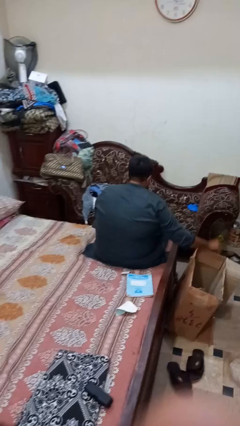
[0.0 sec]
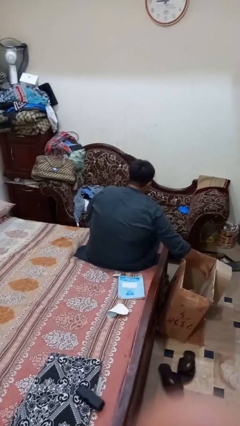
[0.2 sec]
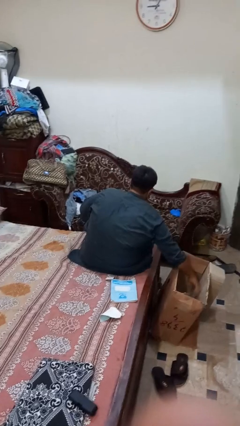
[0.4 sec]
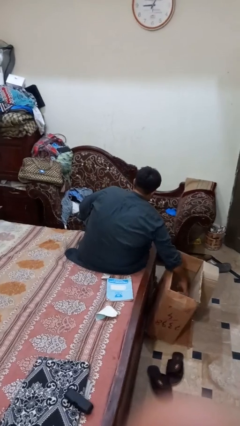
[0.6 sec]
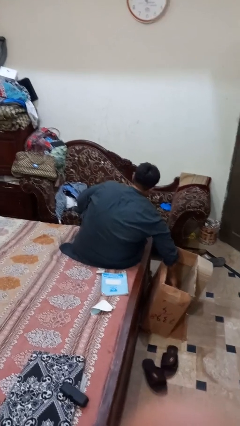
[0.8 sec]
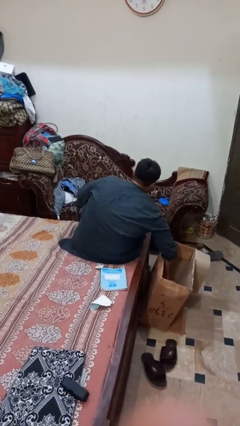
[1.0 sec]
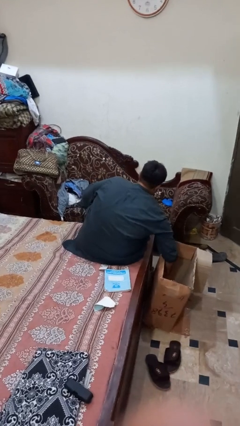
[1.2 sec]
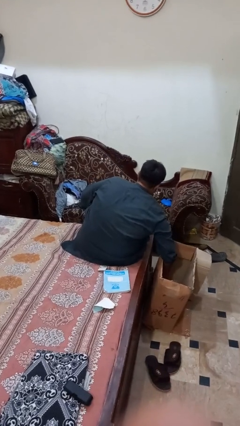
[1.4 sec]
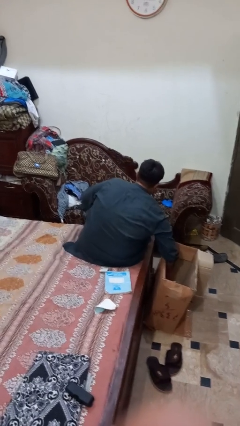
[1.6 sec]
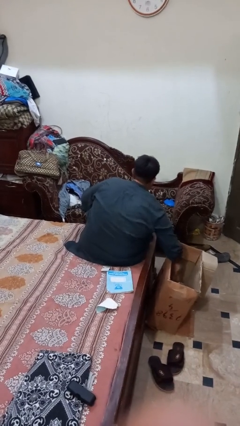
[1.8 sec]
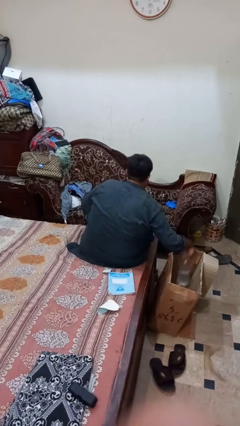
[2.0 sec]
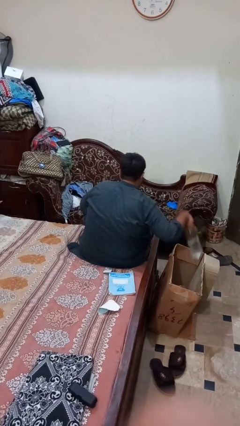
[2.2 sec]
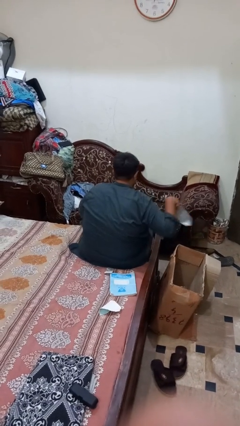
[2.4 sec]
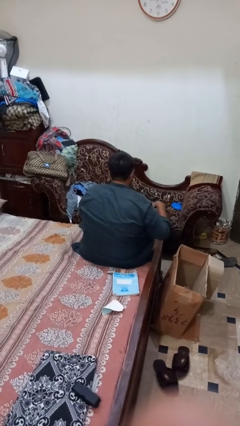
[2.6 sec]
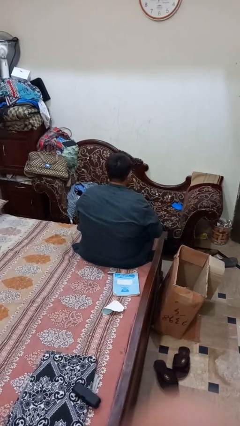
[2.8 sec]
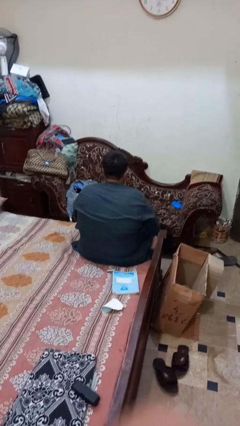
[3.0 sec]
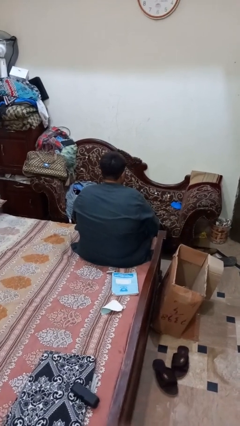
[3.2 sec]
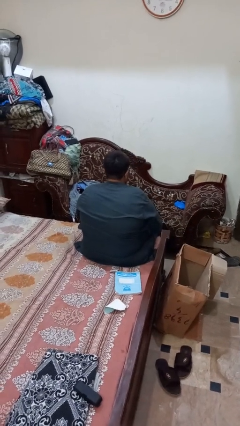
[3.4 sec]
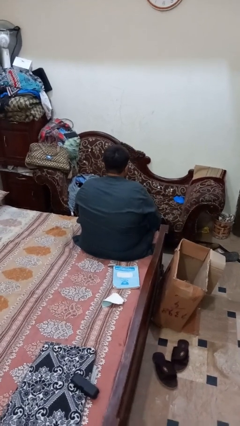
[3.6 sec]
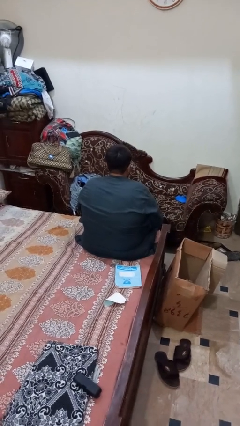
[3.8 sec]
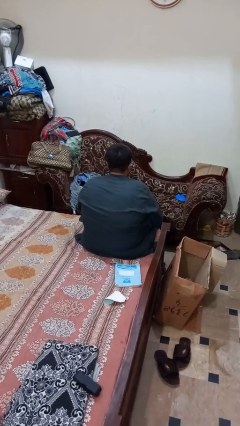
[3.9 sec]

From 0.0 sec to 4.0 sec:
person takes object from box

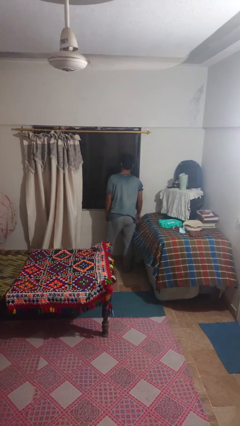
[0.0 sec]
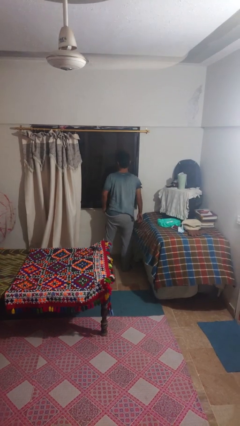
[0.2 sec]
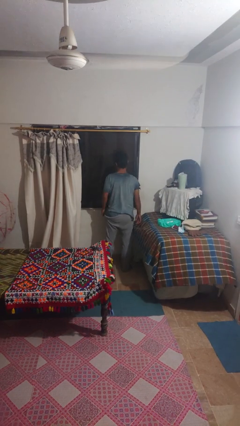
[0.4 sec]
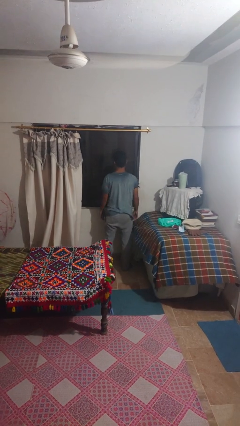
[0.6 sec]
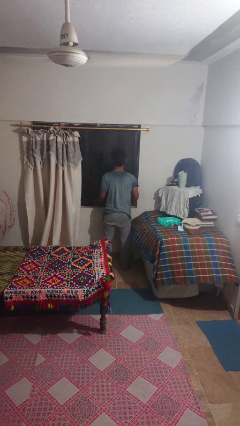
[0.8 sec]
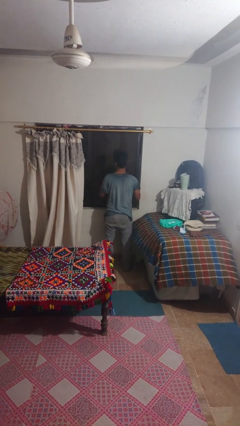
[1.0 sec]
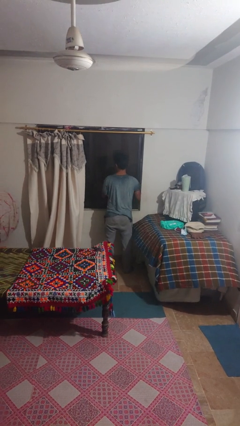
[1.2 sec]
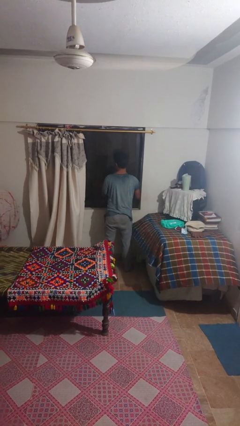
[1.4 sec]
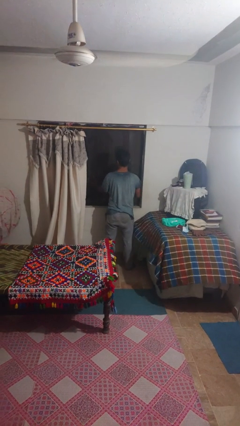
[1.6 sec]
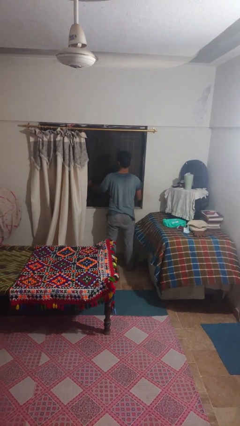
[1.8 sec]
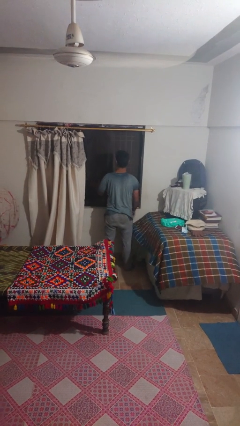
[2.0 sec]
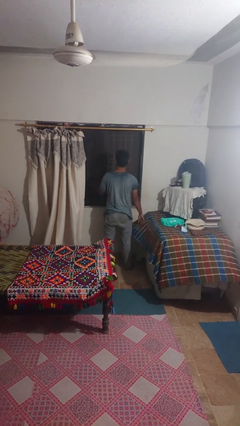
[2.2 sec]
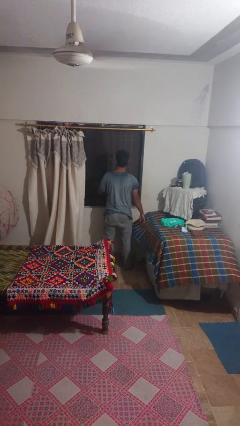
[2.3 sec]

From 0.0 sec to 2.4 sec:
person opens sliding door

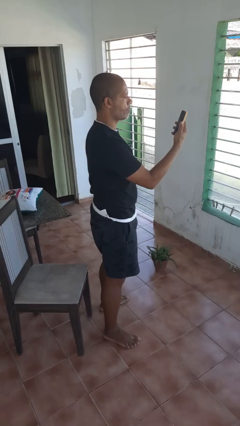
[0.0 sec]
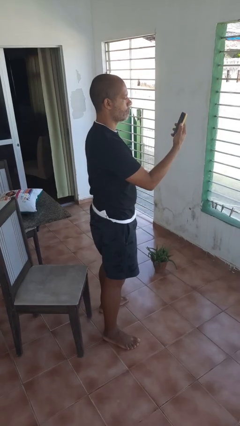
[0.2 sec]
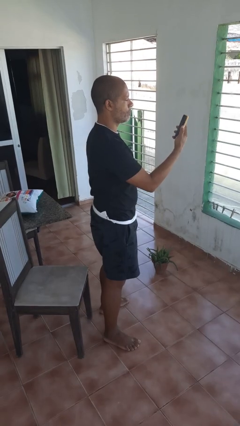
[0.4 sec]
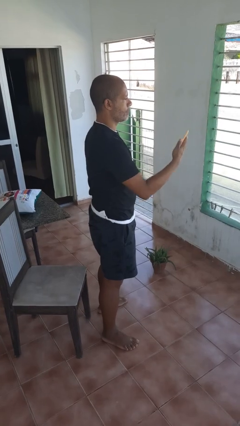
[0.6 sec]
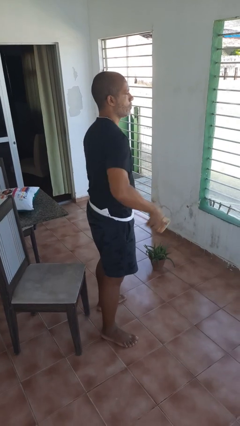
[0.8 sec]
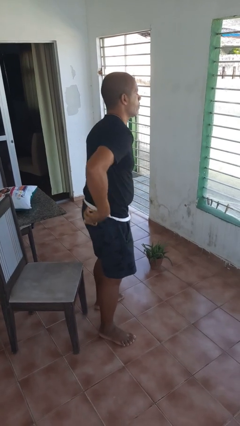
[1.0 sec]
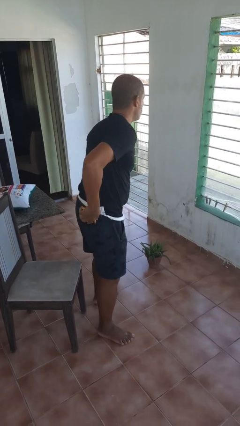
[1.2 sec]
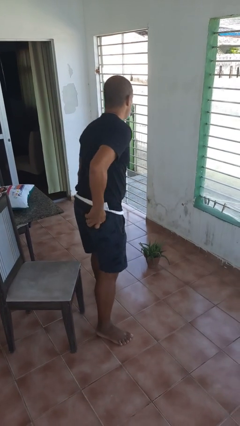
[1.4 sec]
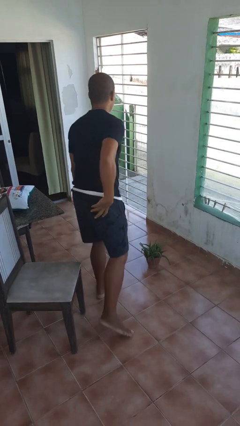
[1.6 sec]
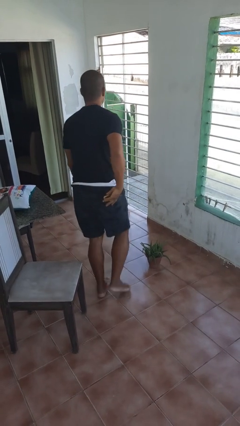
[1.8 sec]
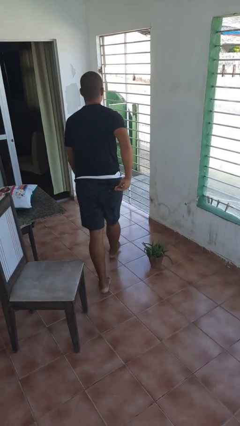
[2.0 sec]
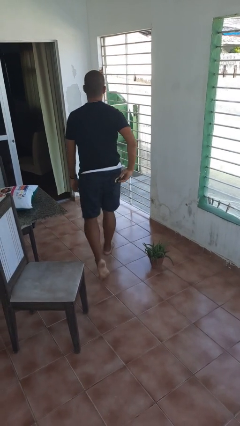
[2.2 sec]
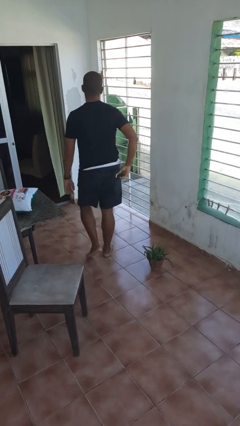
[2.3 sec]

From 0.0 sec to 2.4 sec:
person puts phone into pocket

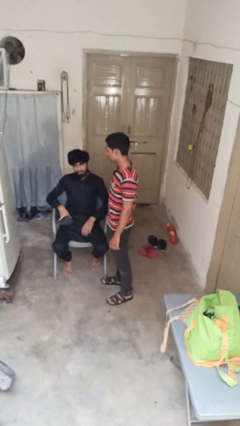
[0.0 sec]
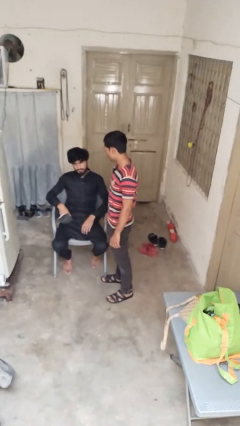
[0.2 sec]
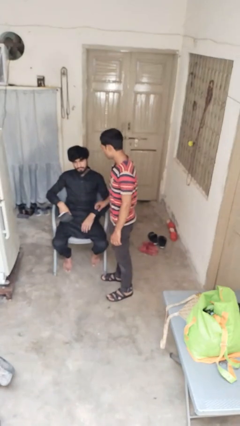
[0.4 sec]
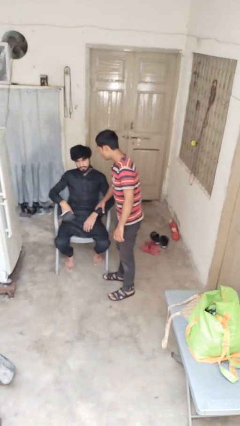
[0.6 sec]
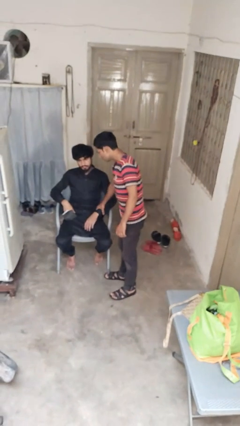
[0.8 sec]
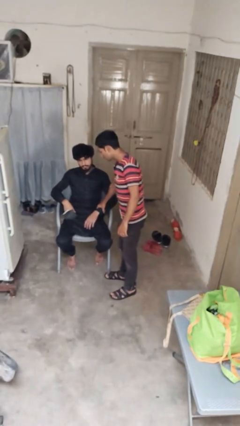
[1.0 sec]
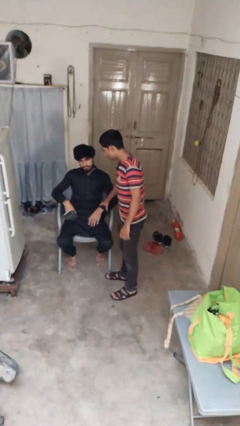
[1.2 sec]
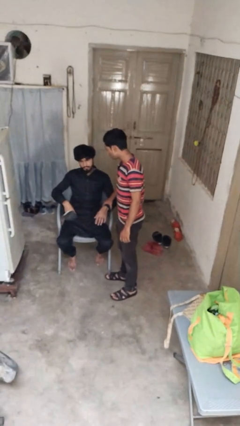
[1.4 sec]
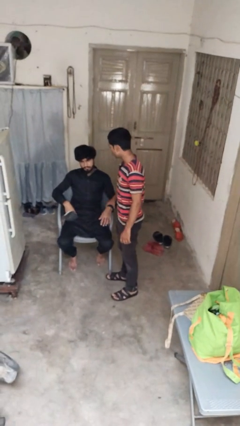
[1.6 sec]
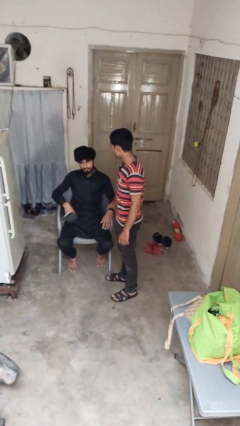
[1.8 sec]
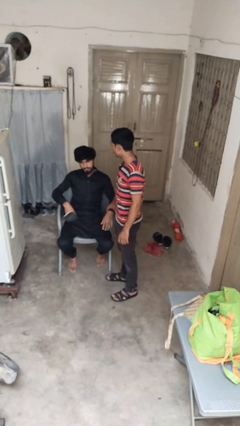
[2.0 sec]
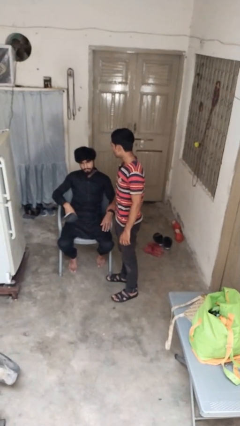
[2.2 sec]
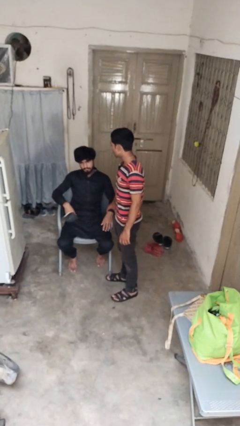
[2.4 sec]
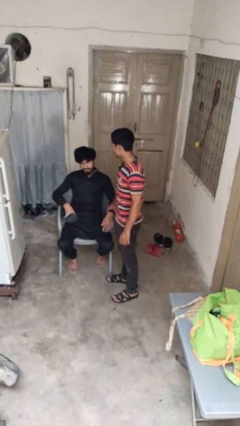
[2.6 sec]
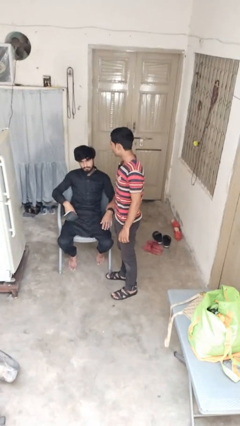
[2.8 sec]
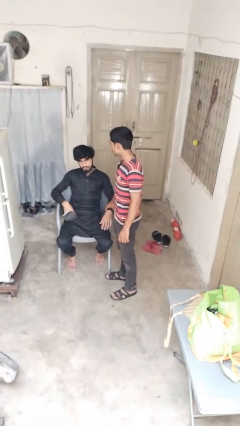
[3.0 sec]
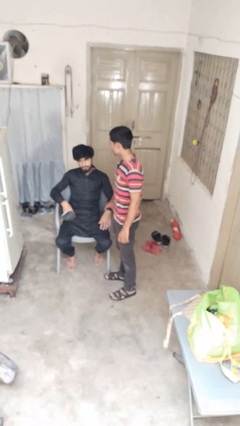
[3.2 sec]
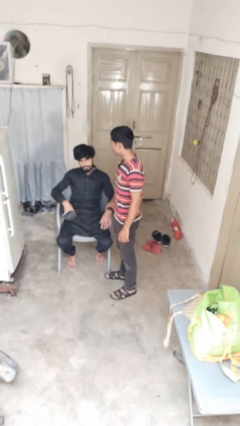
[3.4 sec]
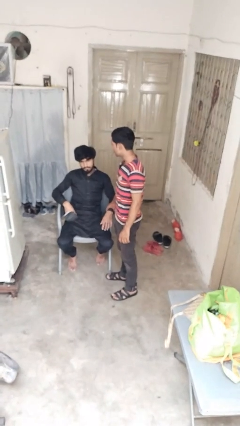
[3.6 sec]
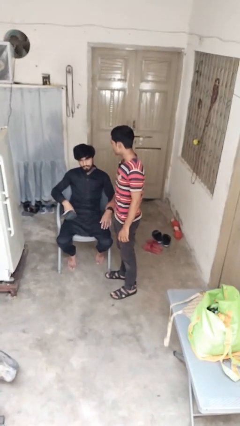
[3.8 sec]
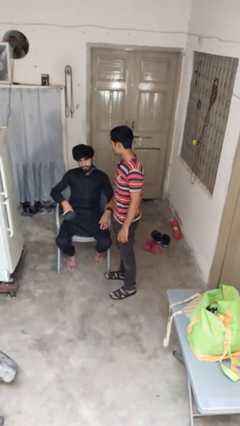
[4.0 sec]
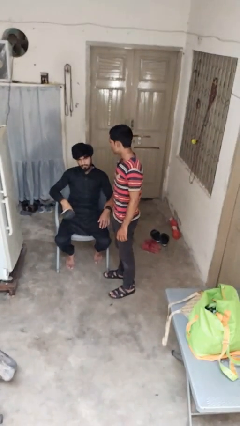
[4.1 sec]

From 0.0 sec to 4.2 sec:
person grabs person by forearm

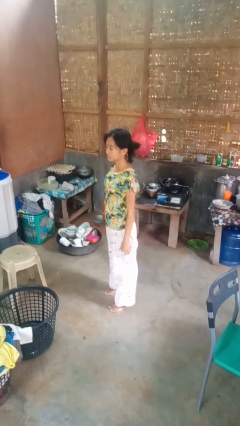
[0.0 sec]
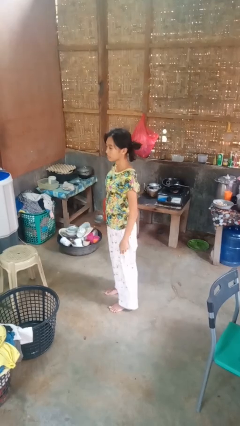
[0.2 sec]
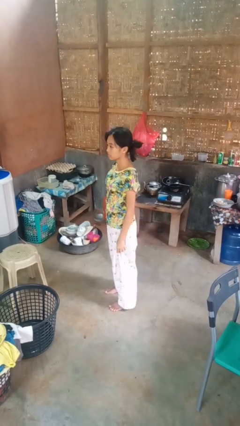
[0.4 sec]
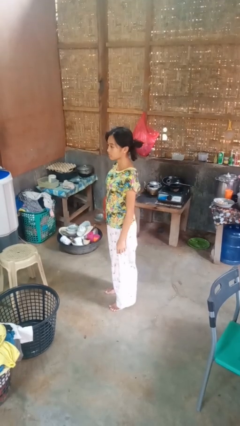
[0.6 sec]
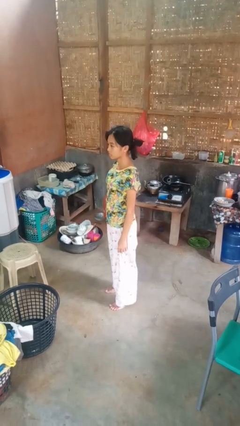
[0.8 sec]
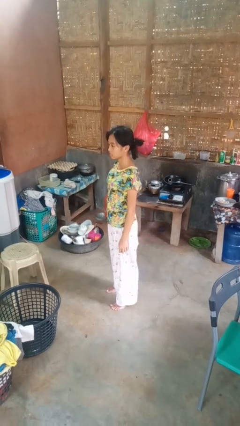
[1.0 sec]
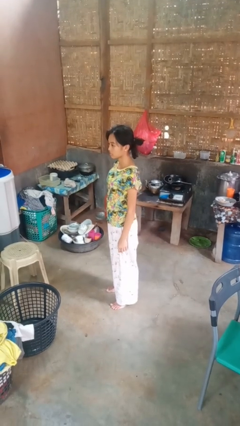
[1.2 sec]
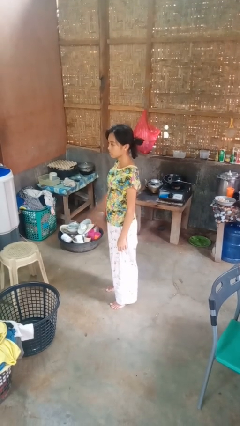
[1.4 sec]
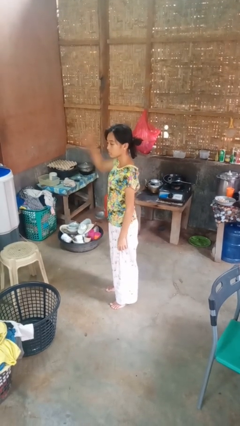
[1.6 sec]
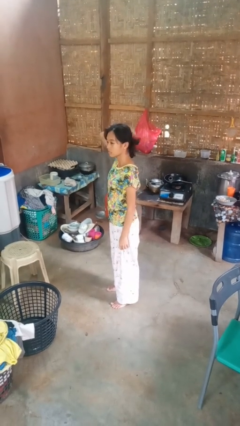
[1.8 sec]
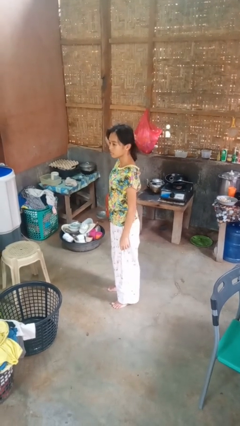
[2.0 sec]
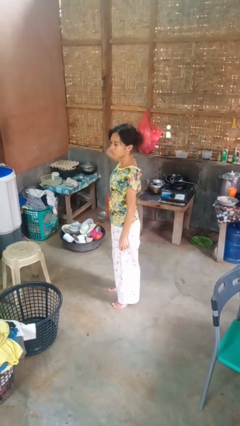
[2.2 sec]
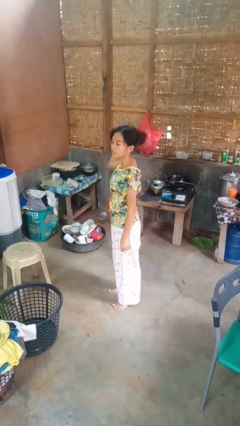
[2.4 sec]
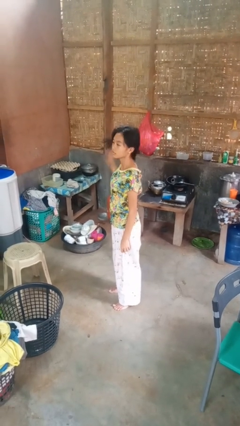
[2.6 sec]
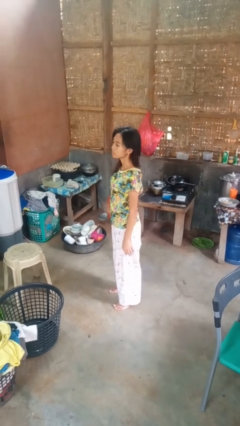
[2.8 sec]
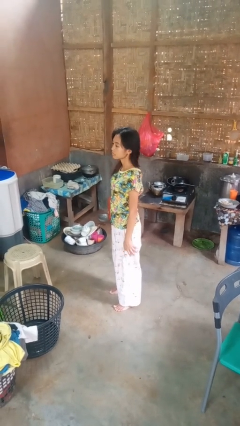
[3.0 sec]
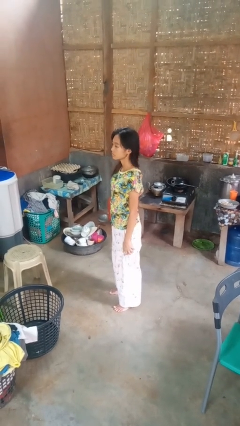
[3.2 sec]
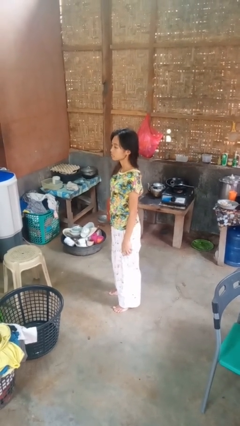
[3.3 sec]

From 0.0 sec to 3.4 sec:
person takes off hairtie

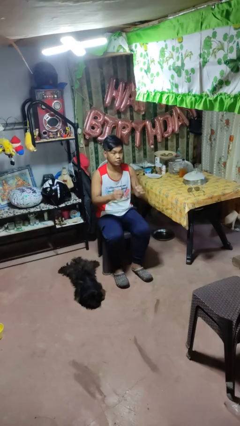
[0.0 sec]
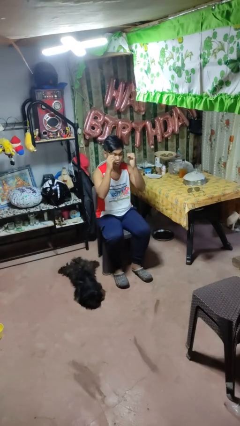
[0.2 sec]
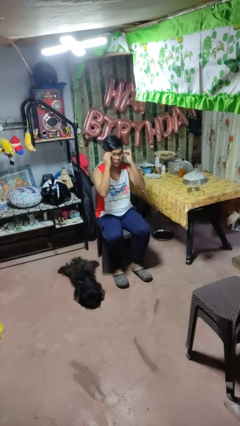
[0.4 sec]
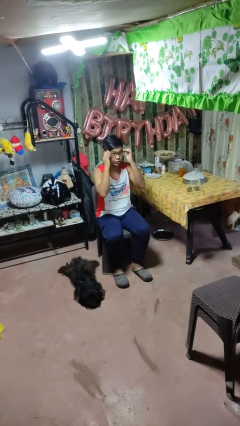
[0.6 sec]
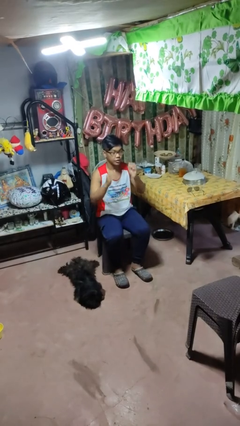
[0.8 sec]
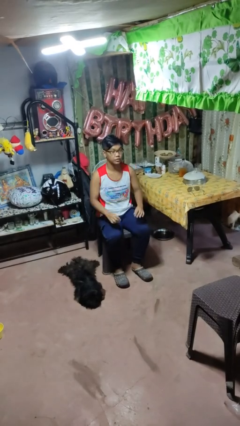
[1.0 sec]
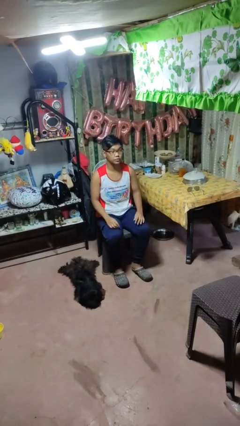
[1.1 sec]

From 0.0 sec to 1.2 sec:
person puts on glasses
